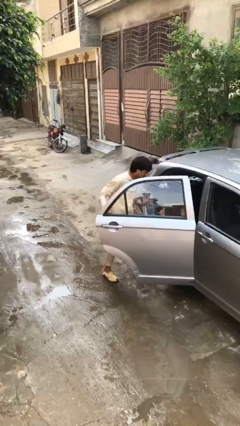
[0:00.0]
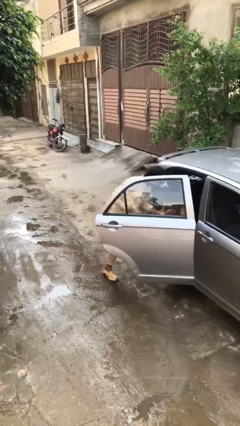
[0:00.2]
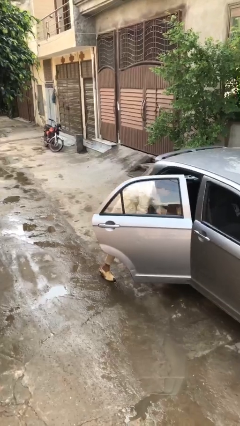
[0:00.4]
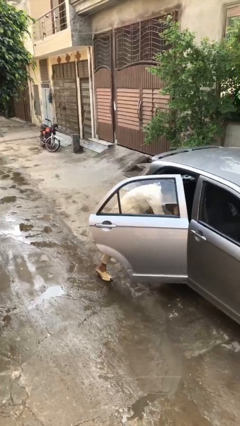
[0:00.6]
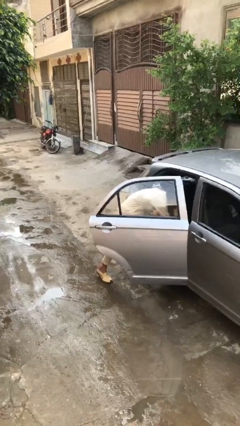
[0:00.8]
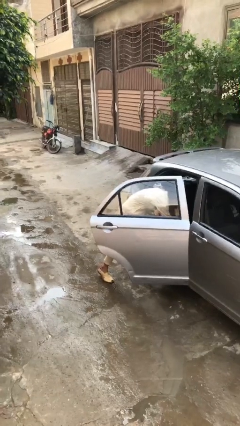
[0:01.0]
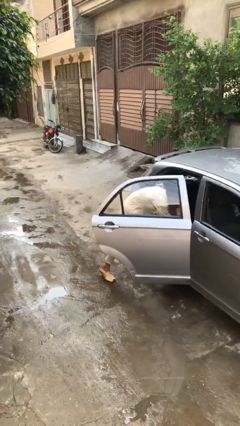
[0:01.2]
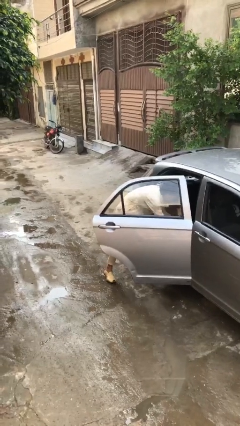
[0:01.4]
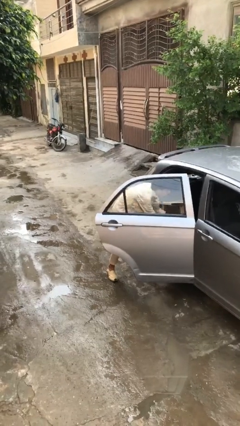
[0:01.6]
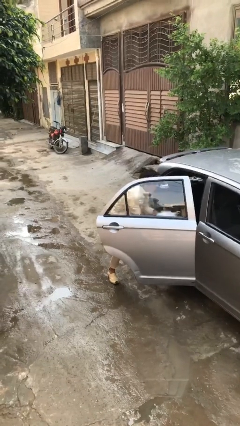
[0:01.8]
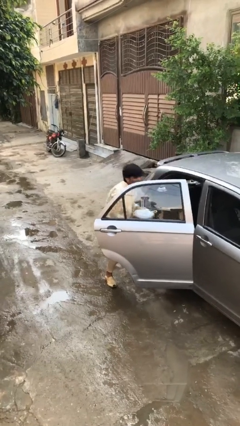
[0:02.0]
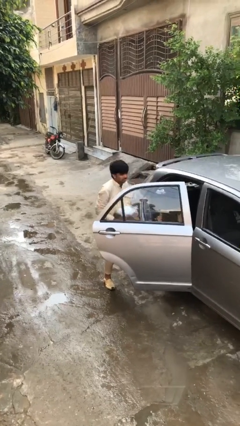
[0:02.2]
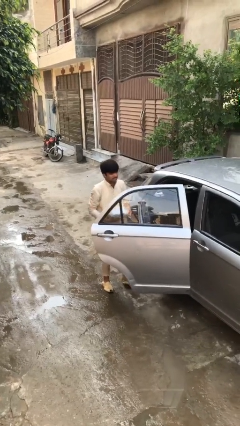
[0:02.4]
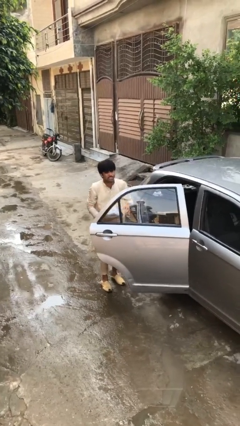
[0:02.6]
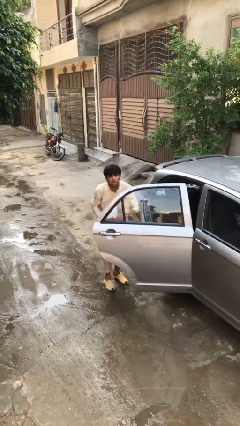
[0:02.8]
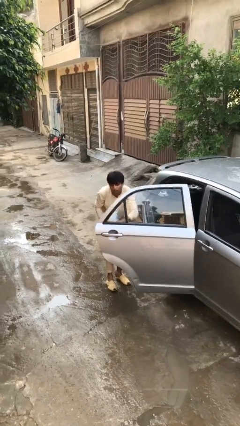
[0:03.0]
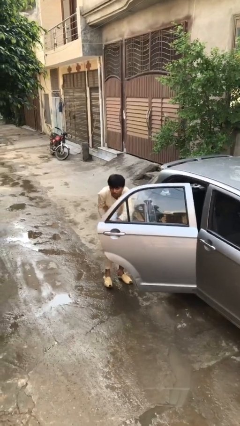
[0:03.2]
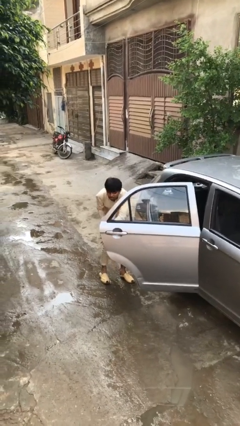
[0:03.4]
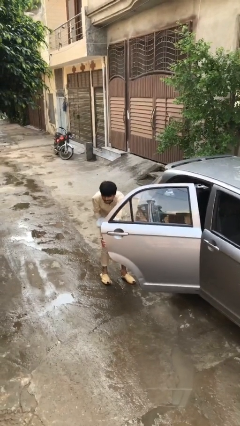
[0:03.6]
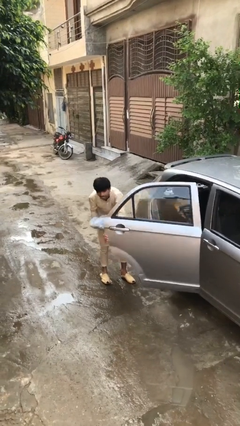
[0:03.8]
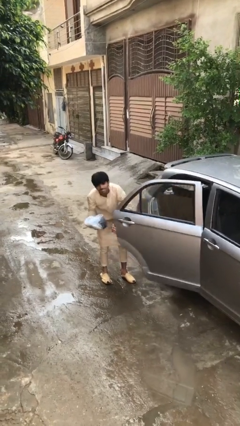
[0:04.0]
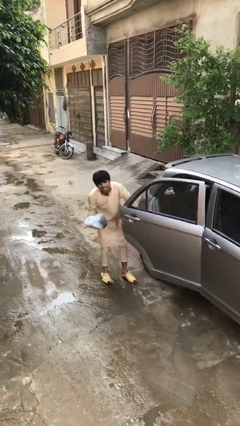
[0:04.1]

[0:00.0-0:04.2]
person unloads car

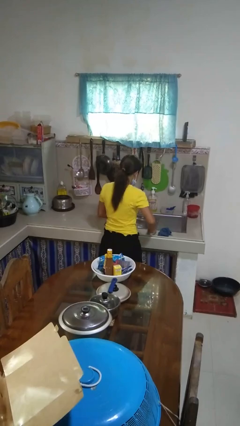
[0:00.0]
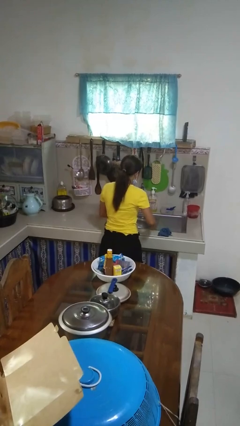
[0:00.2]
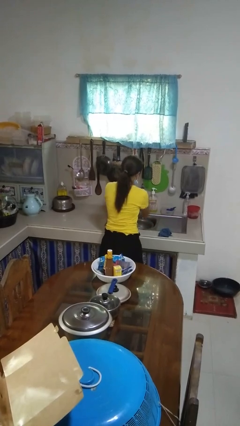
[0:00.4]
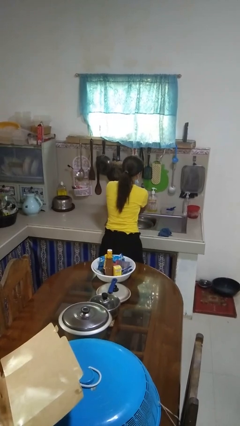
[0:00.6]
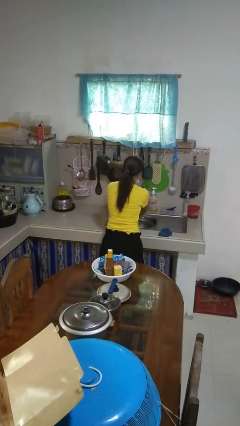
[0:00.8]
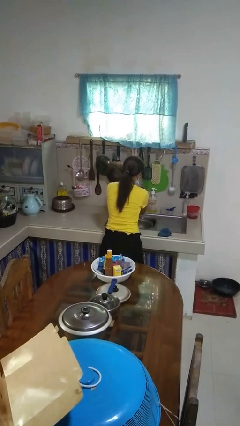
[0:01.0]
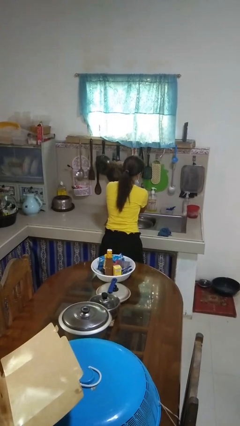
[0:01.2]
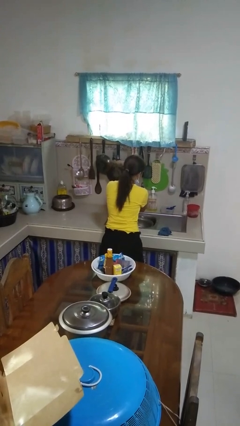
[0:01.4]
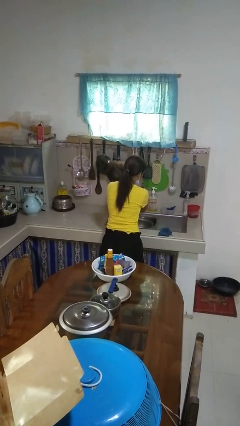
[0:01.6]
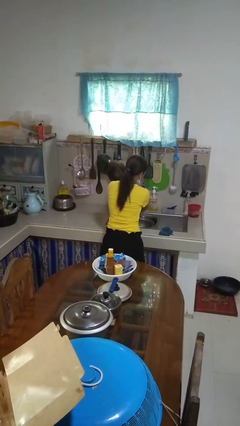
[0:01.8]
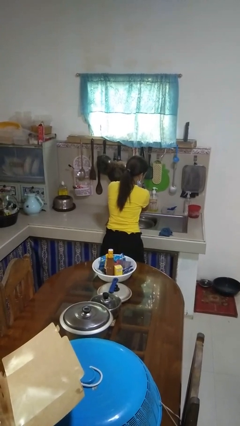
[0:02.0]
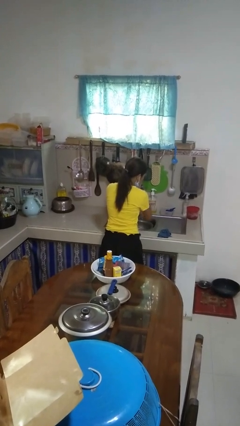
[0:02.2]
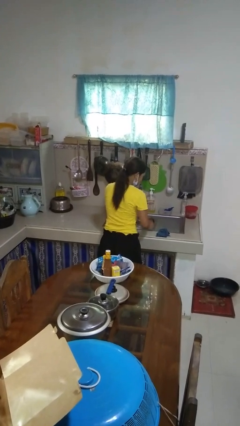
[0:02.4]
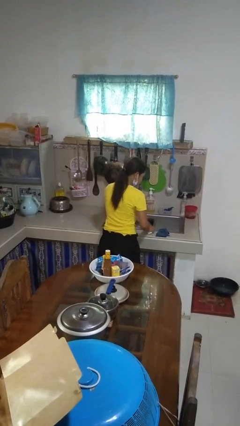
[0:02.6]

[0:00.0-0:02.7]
person washes hands

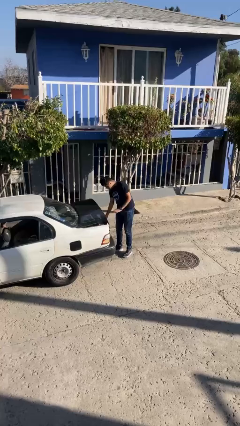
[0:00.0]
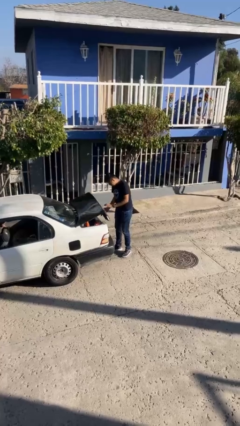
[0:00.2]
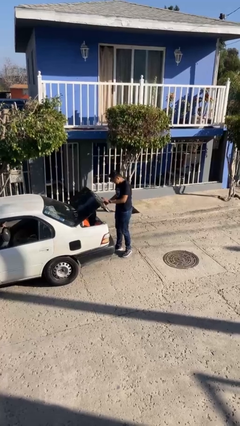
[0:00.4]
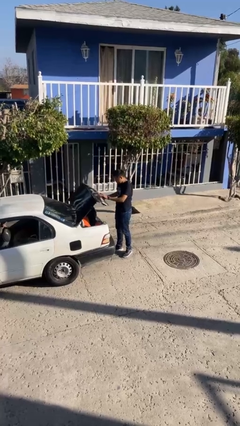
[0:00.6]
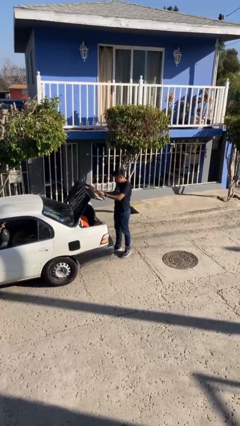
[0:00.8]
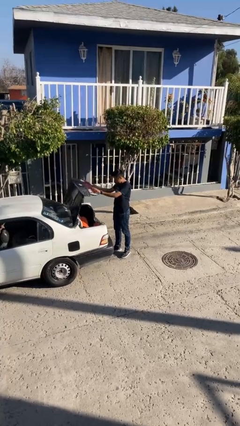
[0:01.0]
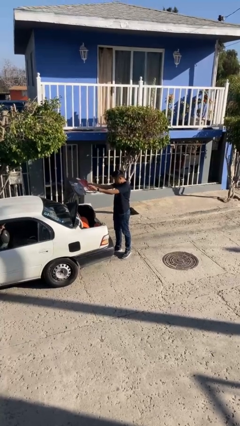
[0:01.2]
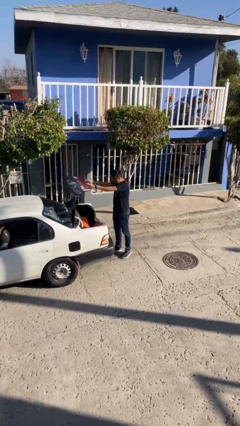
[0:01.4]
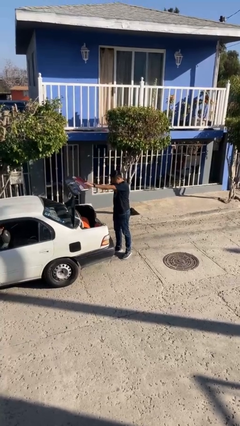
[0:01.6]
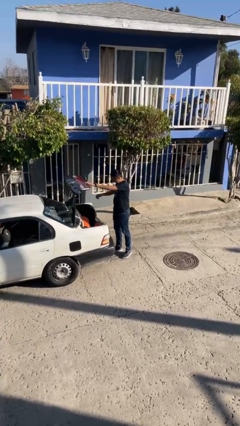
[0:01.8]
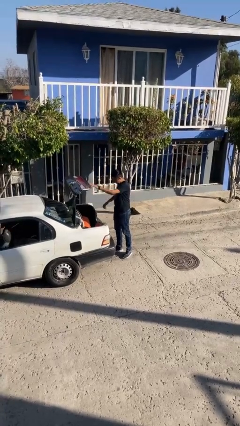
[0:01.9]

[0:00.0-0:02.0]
person opens car trunk

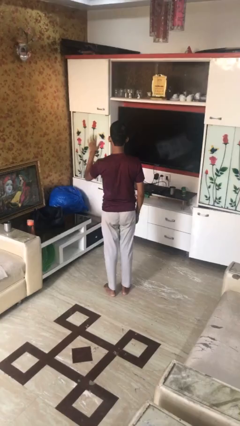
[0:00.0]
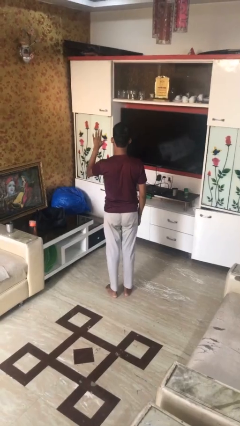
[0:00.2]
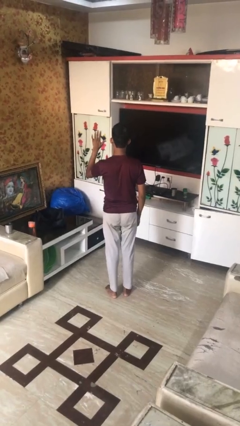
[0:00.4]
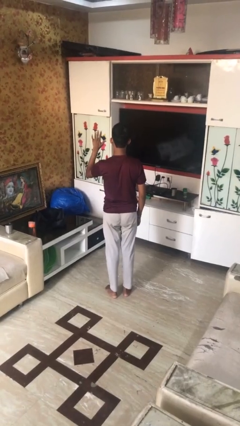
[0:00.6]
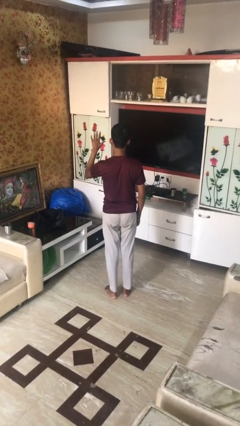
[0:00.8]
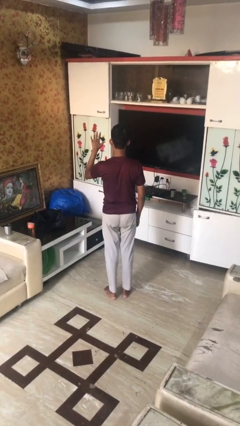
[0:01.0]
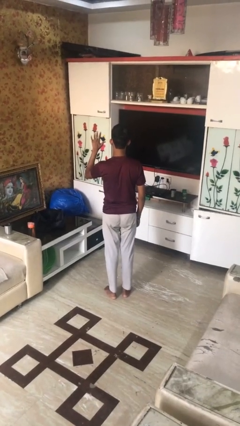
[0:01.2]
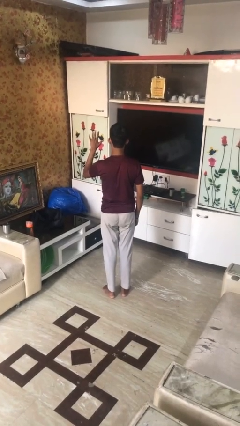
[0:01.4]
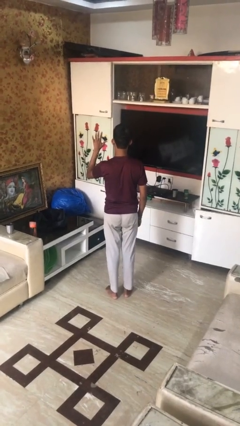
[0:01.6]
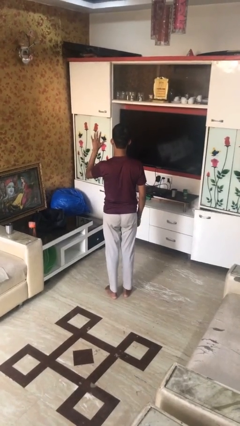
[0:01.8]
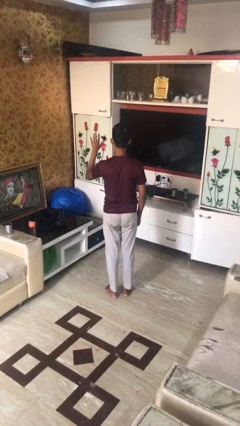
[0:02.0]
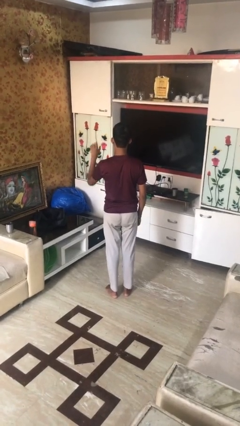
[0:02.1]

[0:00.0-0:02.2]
person gestures number five

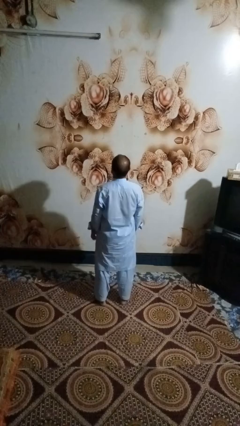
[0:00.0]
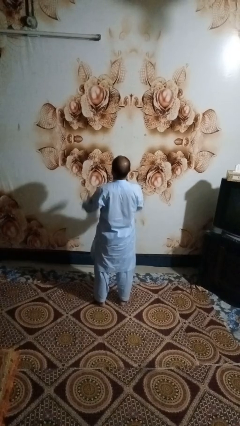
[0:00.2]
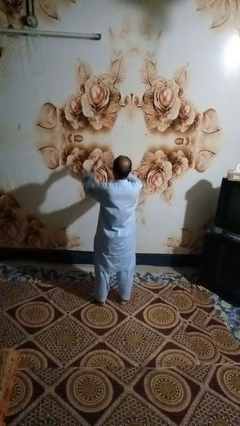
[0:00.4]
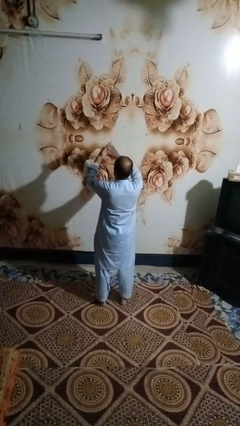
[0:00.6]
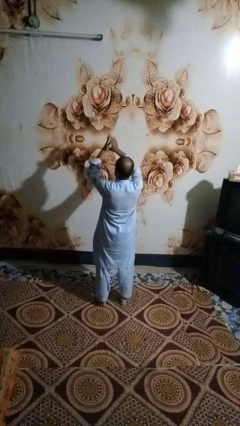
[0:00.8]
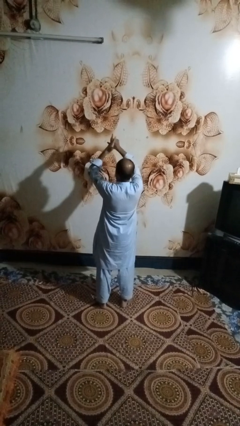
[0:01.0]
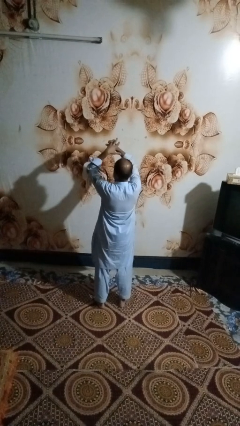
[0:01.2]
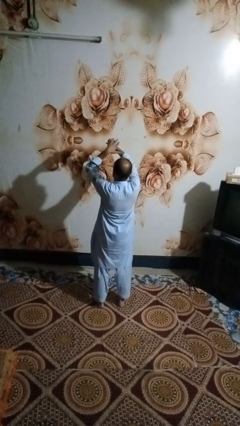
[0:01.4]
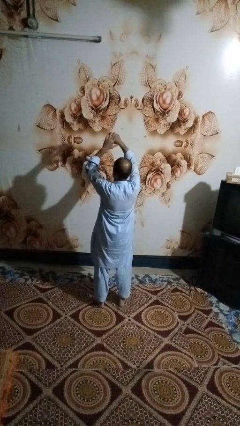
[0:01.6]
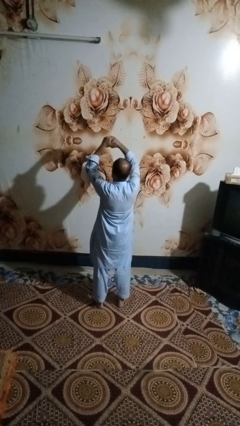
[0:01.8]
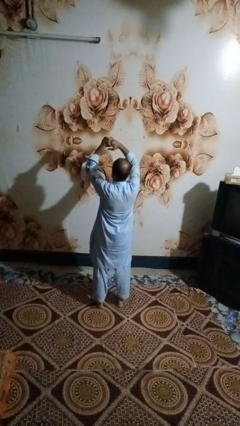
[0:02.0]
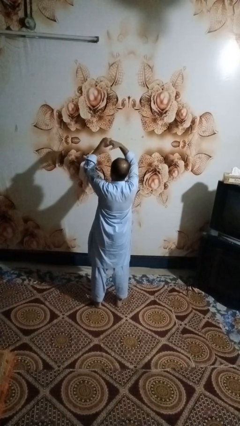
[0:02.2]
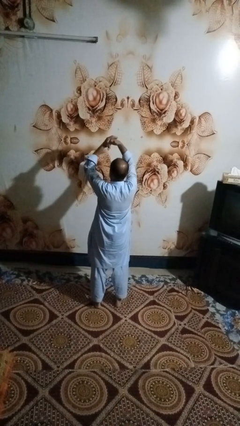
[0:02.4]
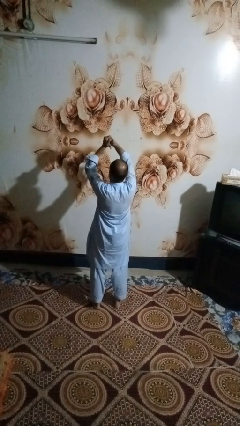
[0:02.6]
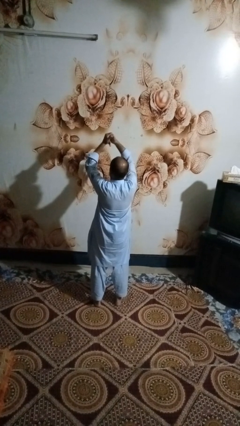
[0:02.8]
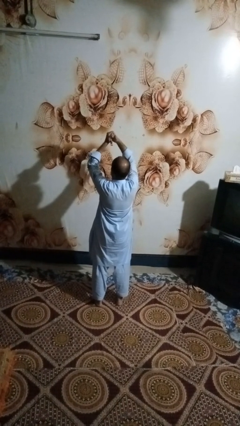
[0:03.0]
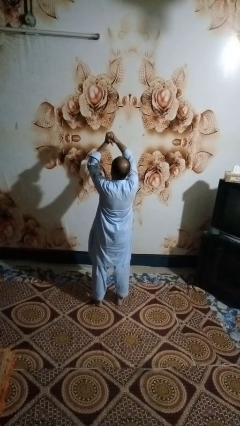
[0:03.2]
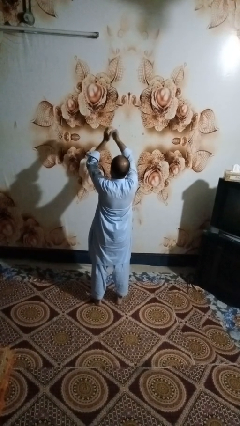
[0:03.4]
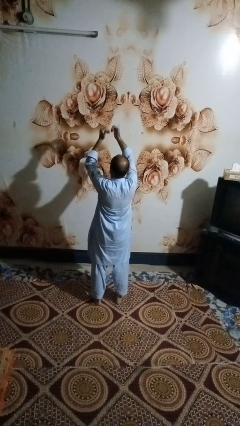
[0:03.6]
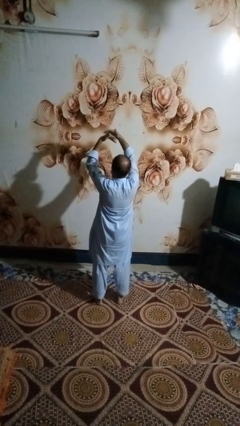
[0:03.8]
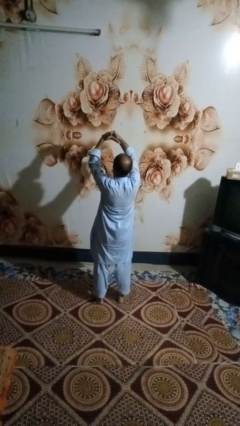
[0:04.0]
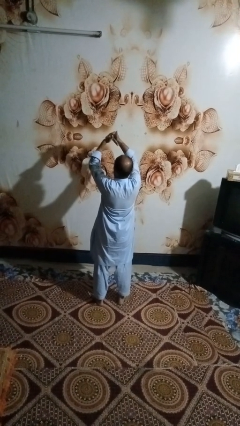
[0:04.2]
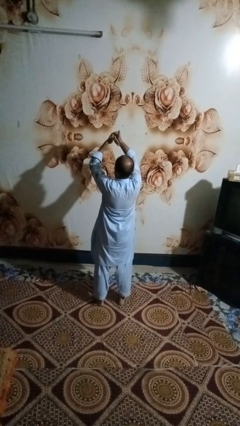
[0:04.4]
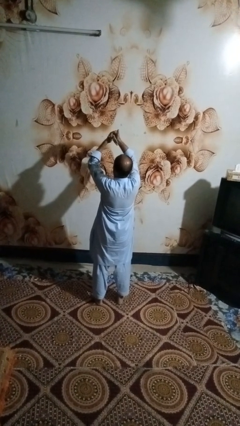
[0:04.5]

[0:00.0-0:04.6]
person cracks knuckles

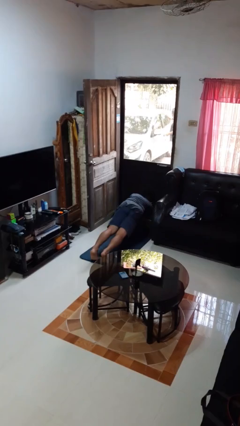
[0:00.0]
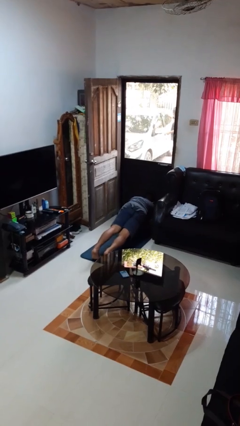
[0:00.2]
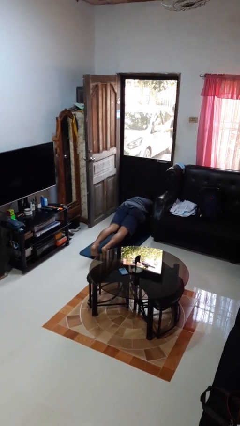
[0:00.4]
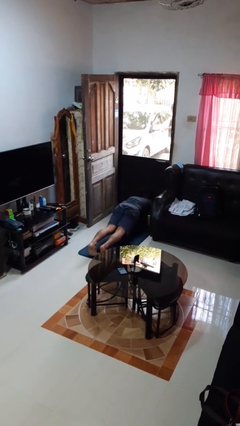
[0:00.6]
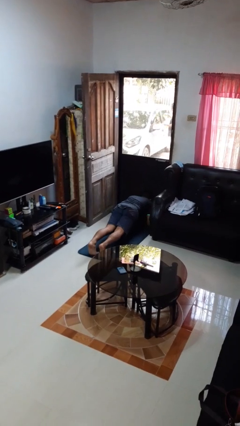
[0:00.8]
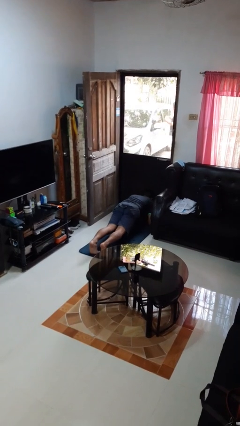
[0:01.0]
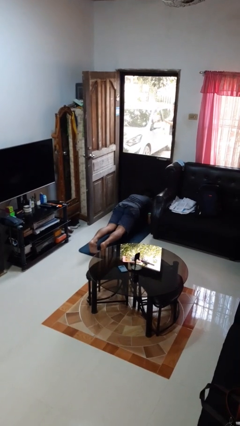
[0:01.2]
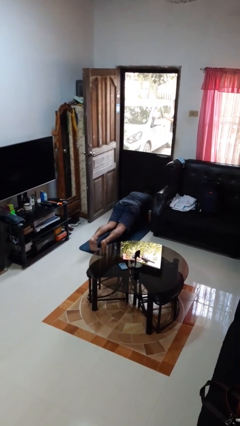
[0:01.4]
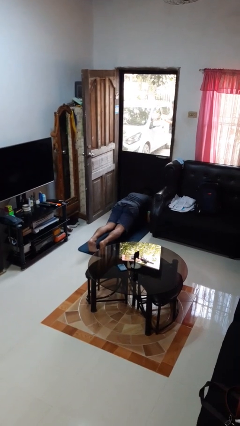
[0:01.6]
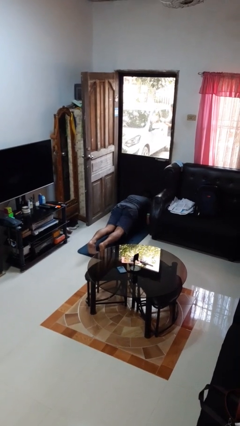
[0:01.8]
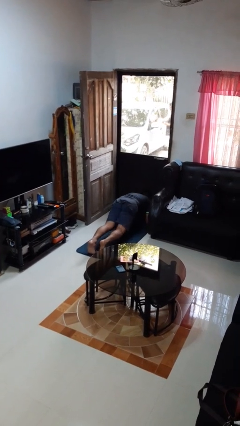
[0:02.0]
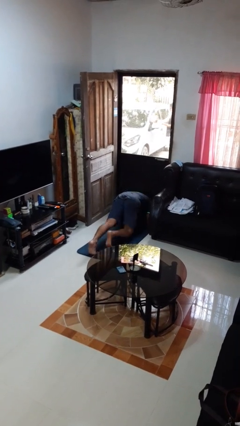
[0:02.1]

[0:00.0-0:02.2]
person exercises with plank
